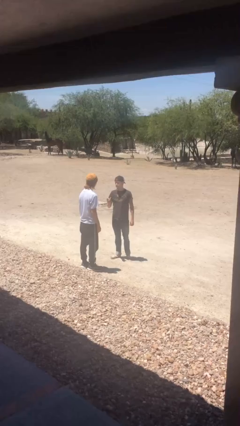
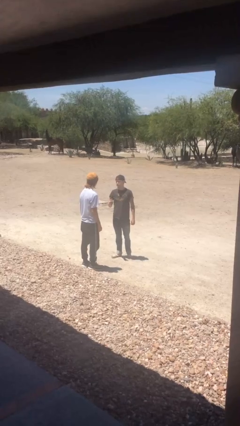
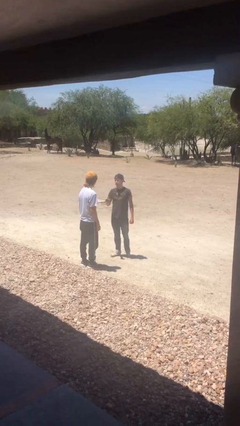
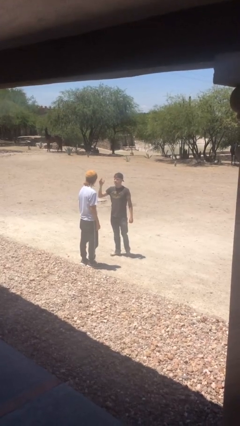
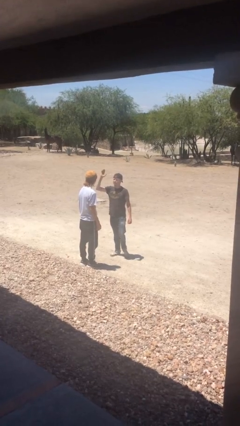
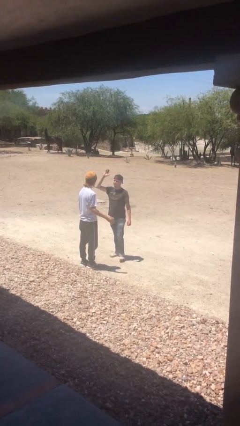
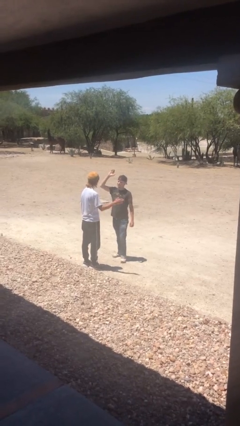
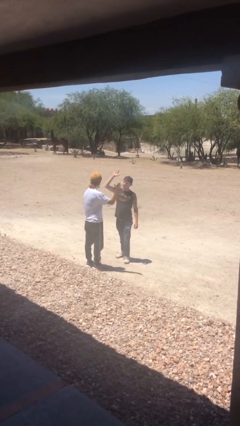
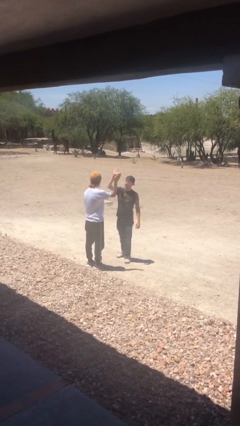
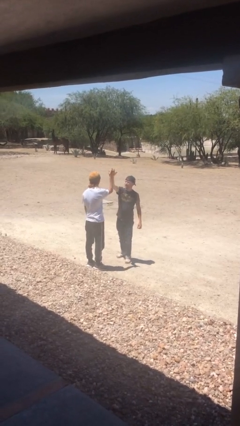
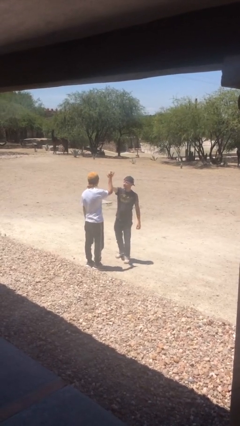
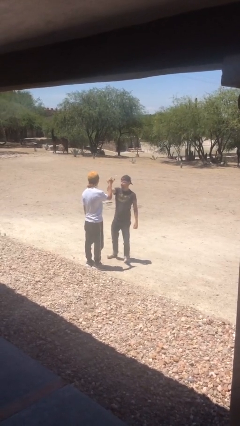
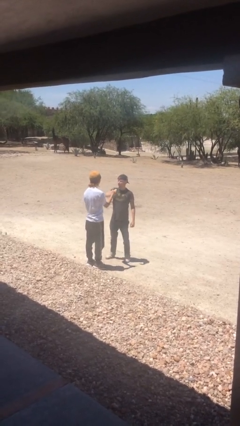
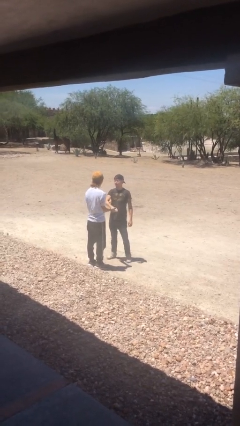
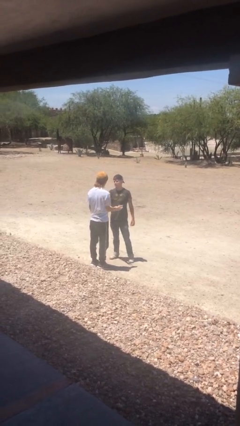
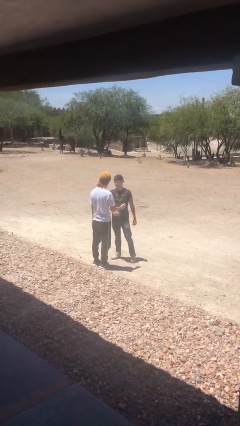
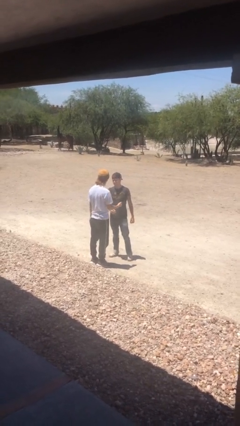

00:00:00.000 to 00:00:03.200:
person highfives hand

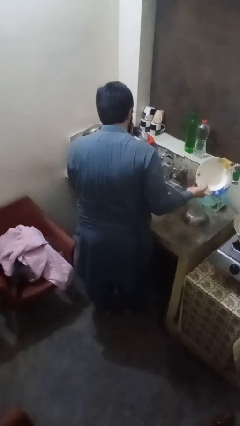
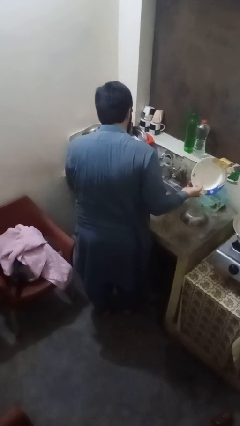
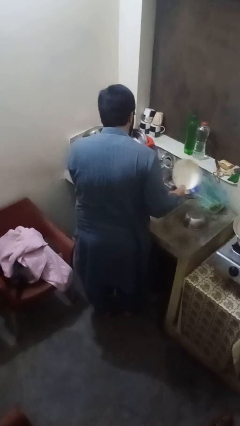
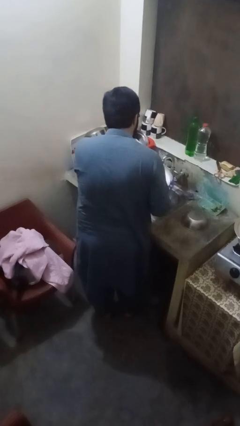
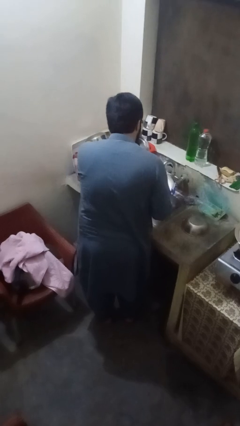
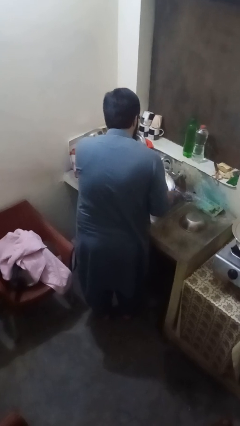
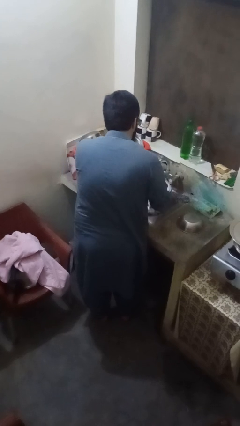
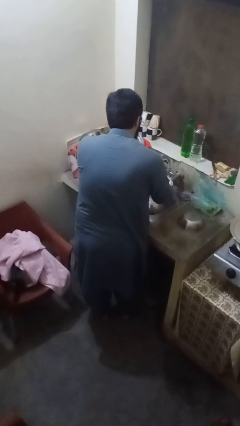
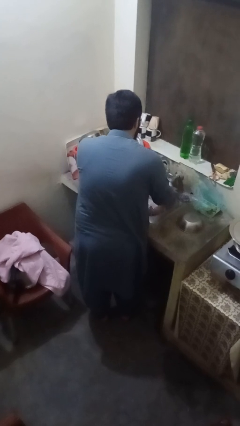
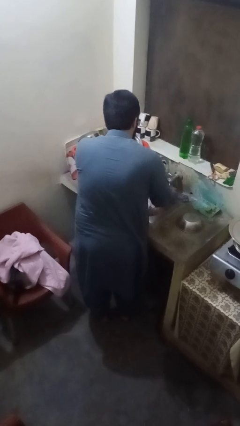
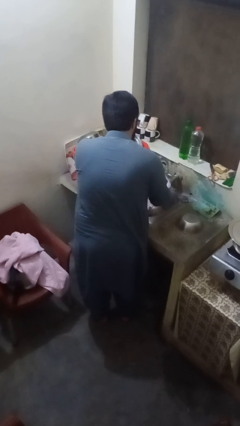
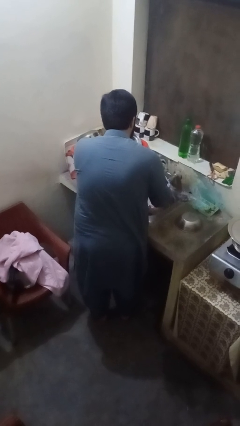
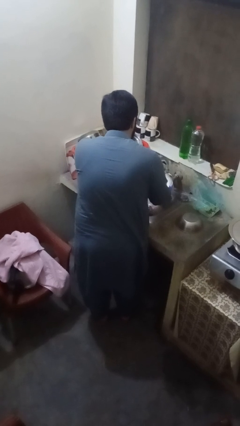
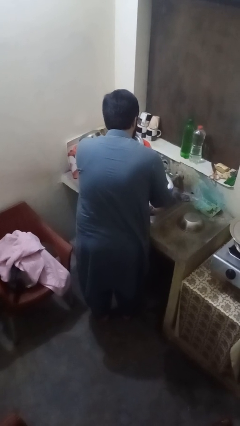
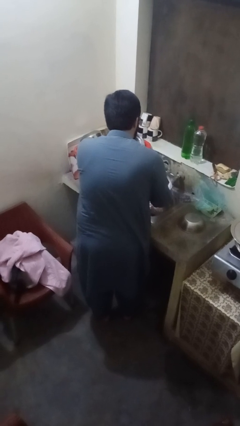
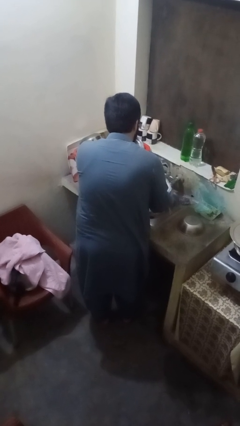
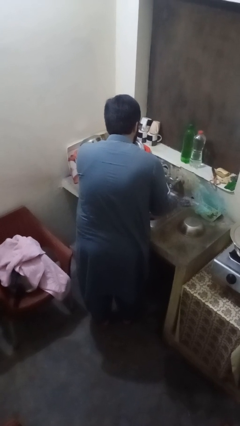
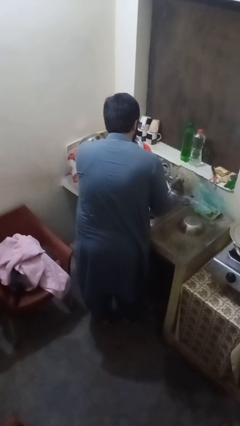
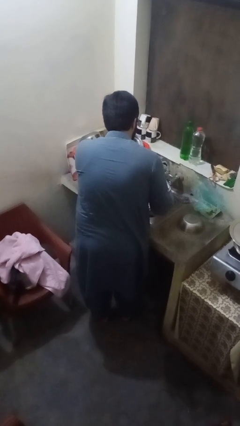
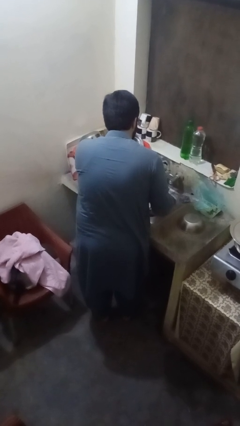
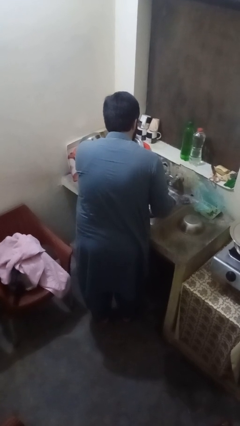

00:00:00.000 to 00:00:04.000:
person washes dish

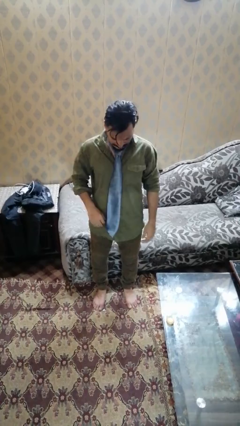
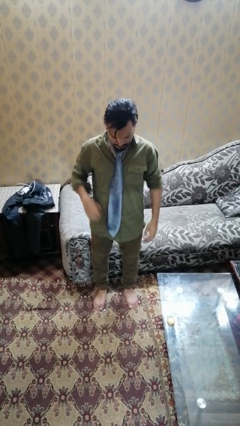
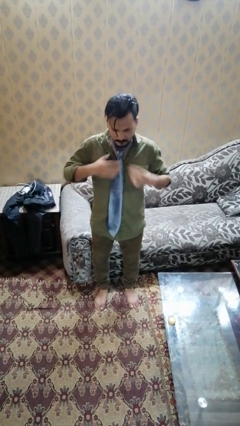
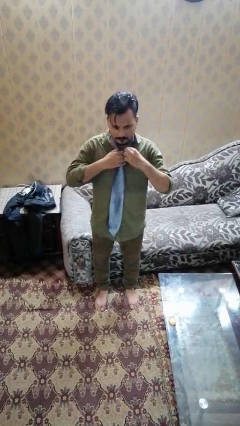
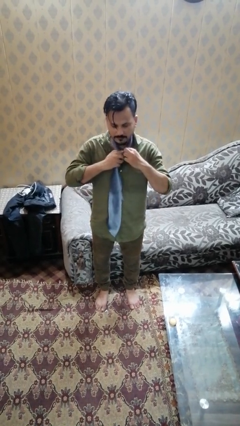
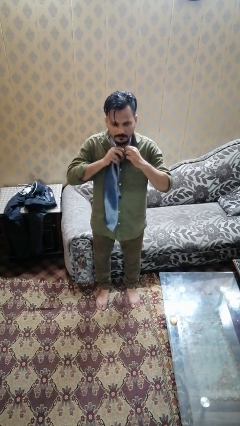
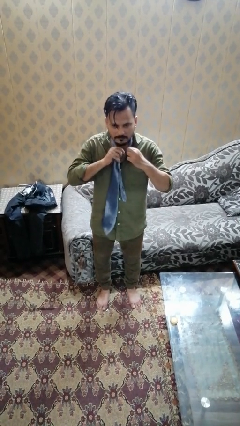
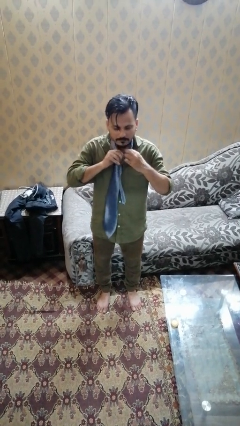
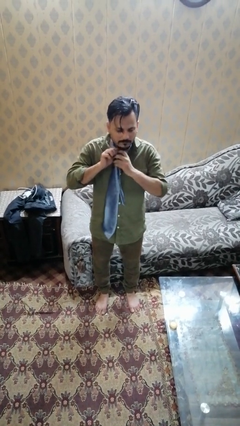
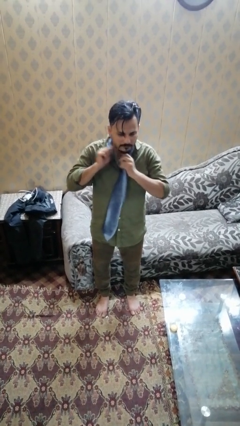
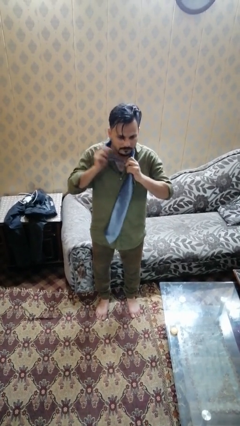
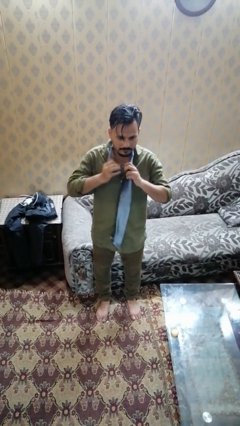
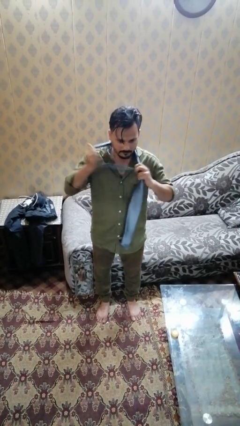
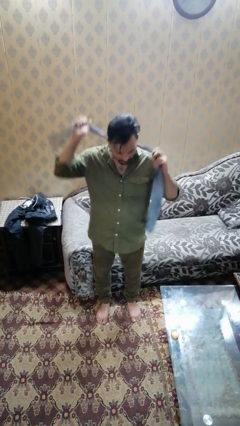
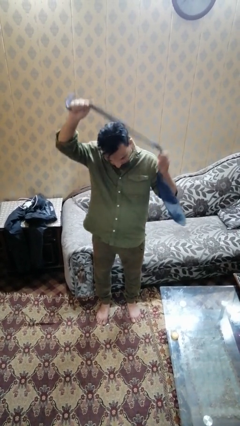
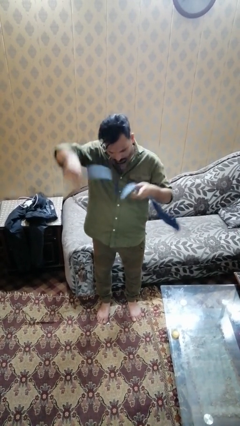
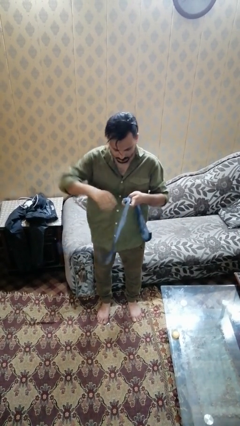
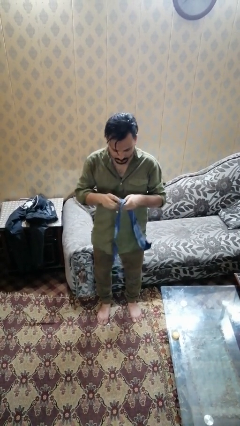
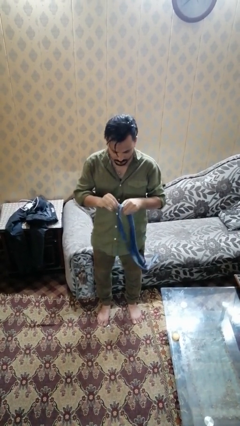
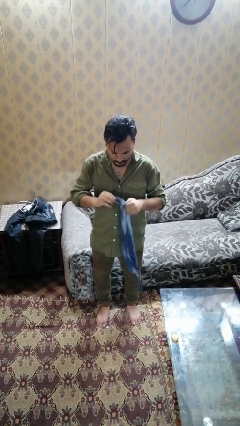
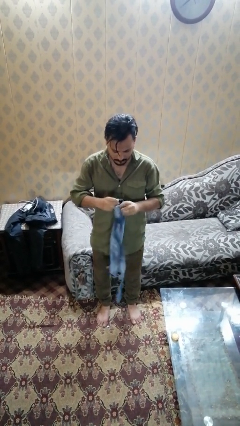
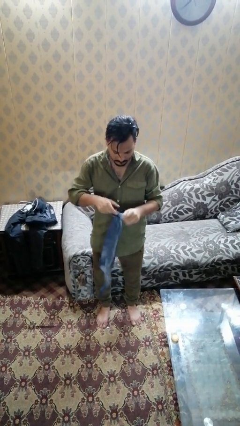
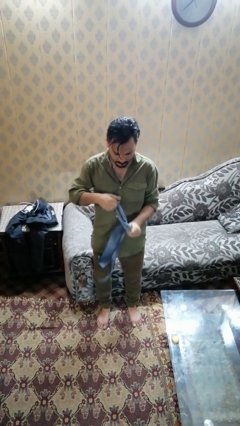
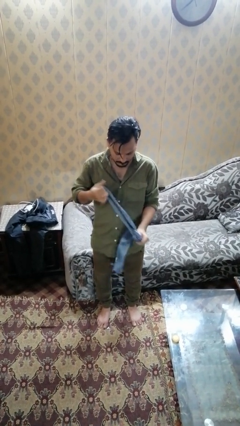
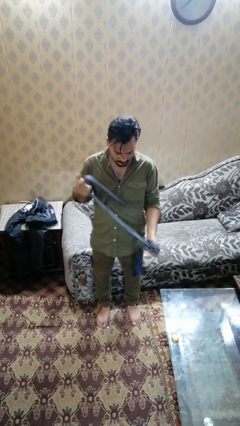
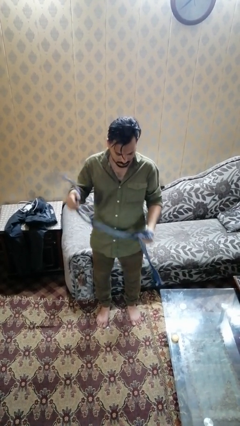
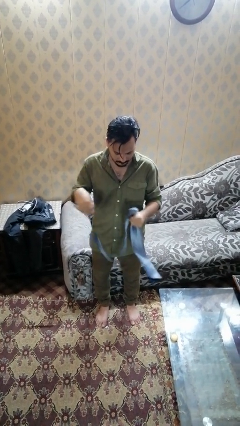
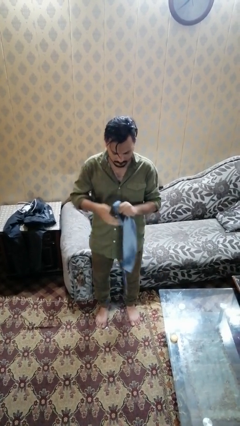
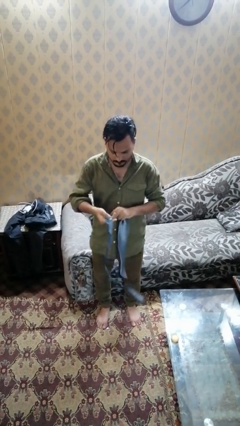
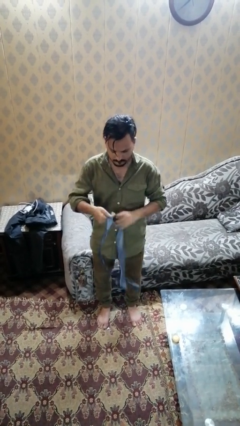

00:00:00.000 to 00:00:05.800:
person takes off necktie

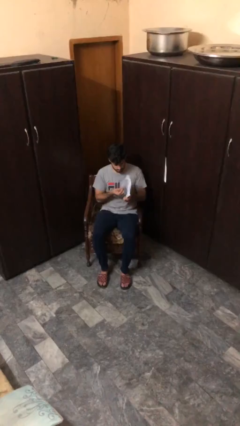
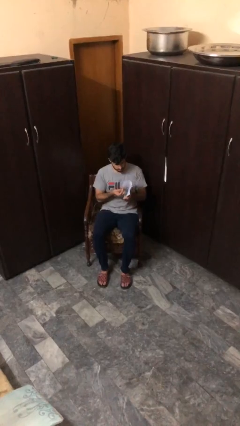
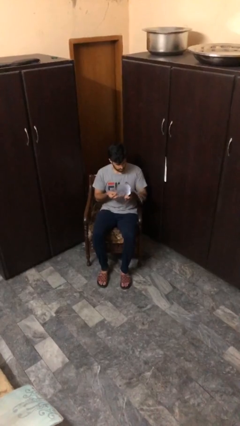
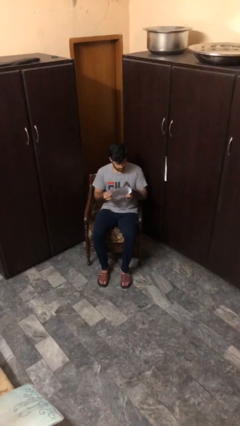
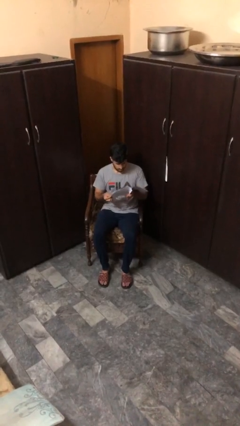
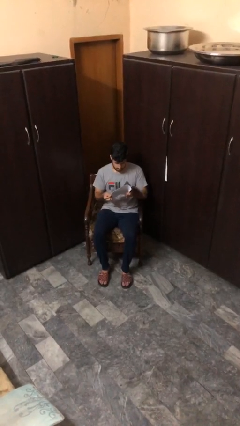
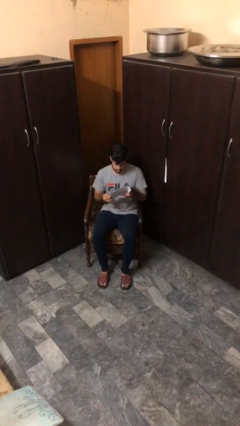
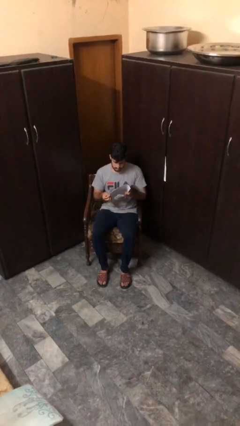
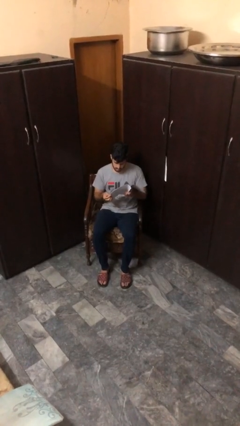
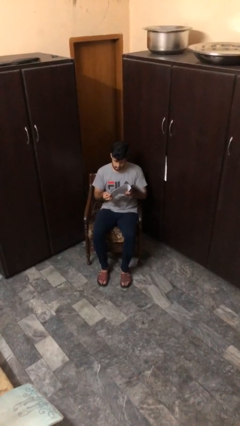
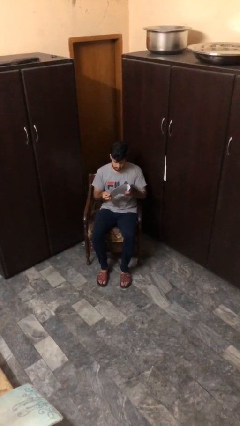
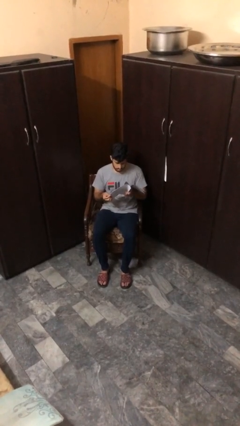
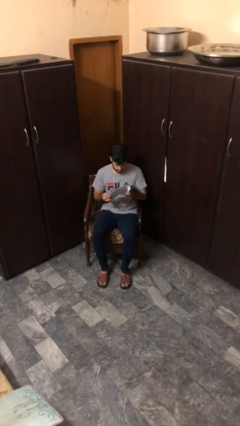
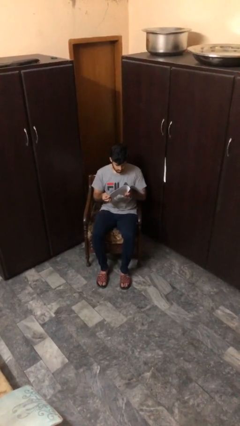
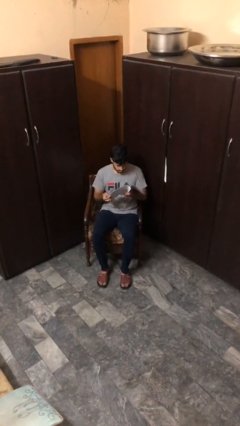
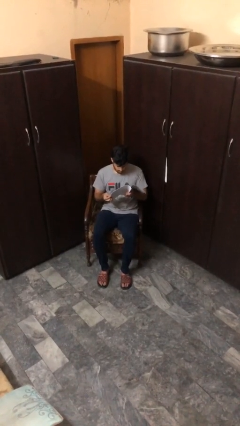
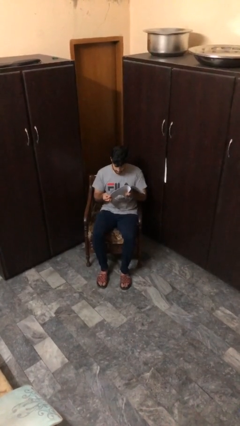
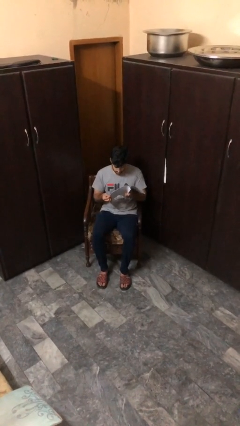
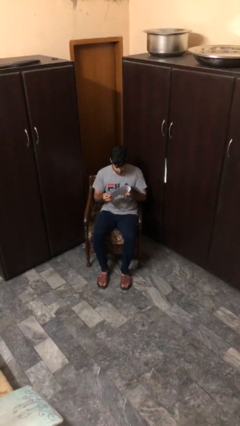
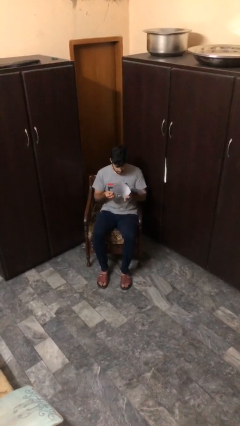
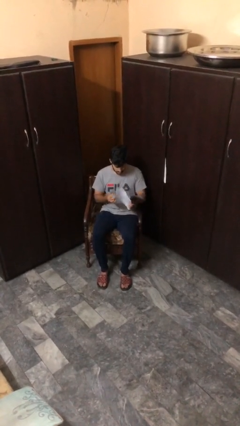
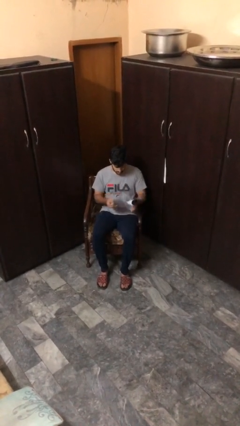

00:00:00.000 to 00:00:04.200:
person reads magazine

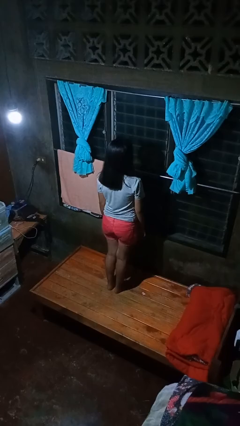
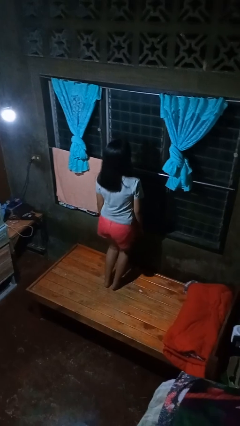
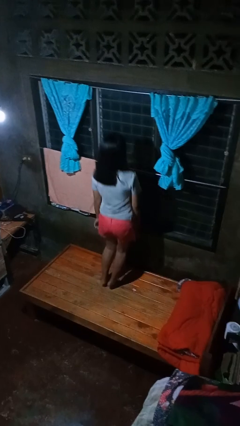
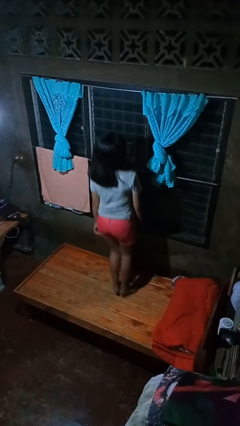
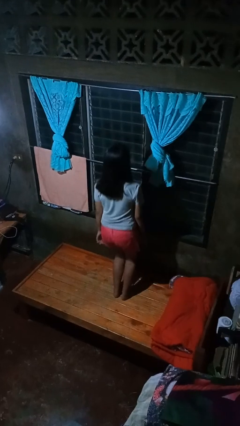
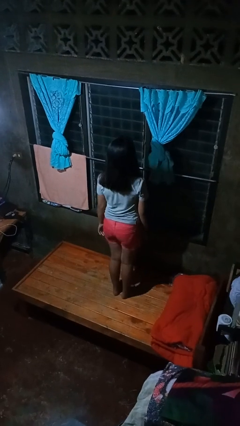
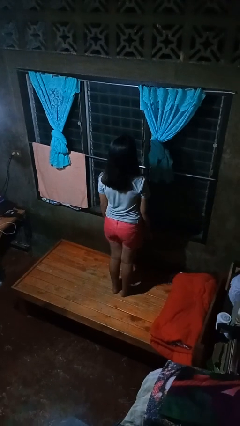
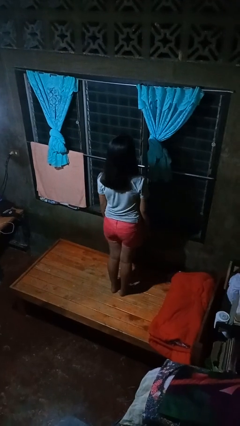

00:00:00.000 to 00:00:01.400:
person jumps on bed
